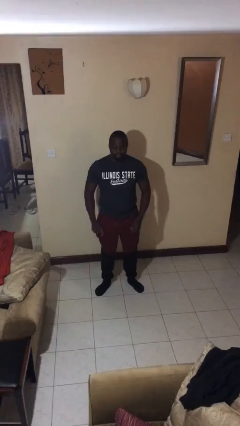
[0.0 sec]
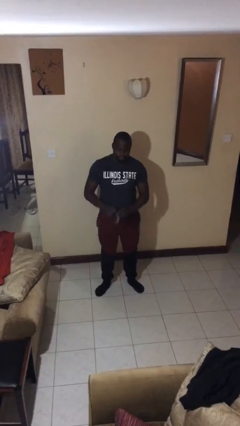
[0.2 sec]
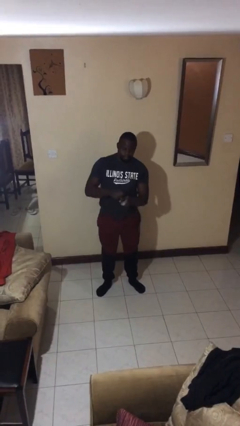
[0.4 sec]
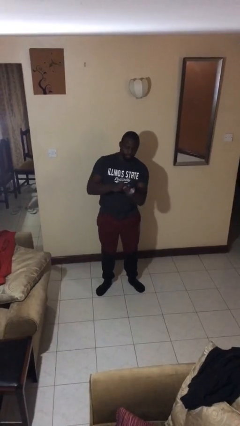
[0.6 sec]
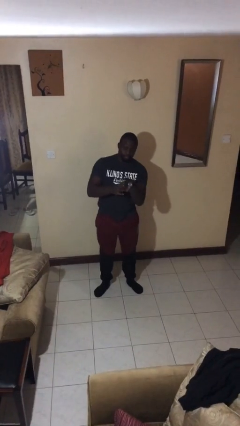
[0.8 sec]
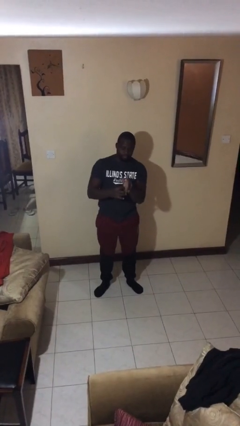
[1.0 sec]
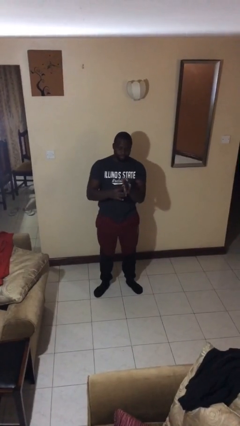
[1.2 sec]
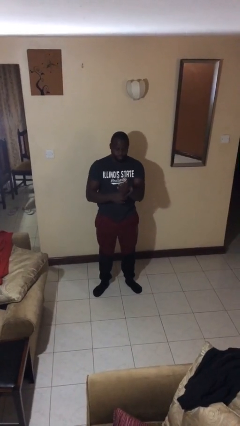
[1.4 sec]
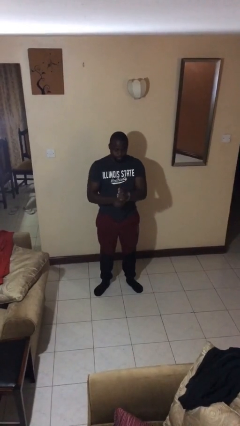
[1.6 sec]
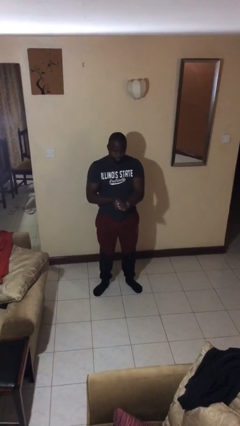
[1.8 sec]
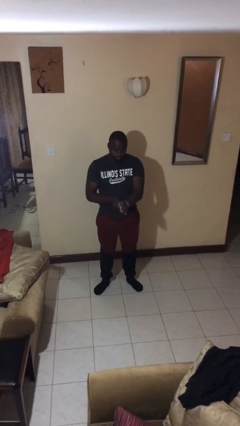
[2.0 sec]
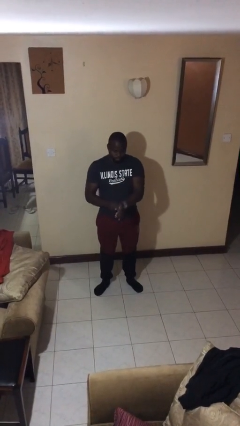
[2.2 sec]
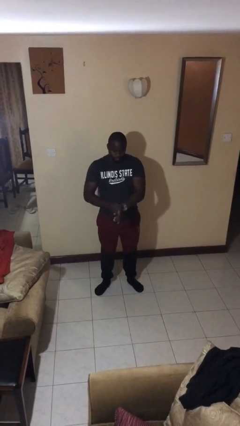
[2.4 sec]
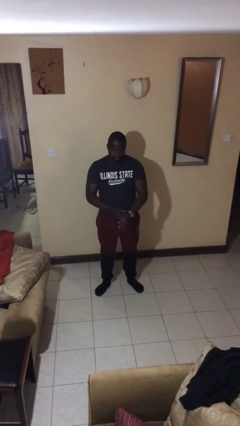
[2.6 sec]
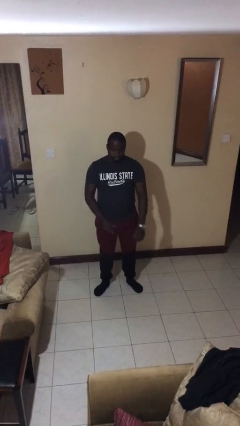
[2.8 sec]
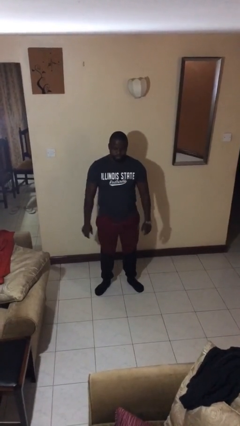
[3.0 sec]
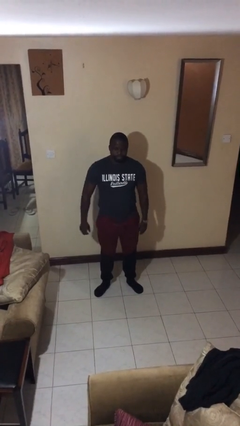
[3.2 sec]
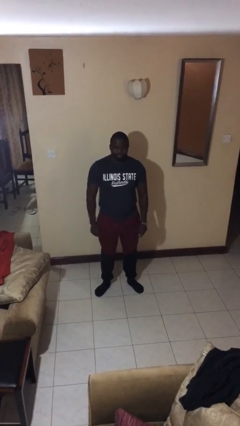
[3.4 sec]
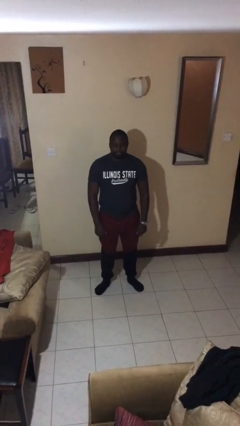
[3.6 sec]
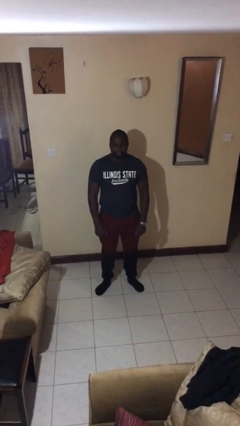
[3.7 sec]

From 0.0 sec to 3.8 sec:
person puts on wristwatch

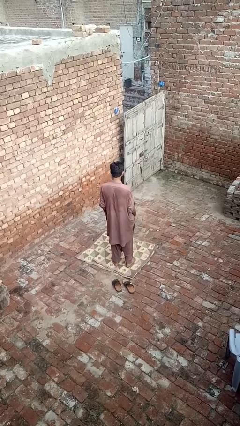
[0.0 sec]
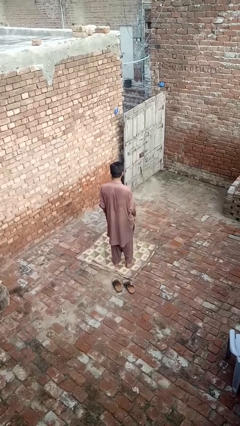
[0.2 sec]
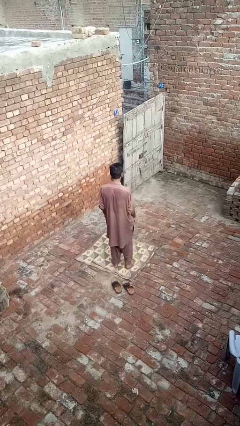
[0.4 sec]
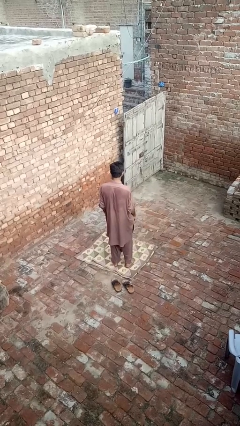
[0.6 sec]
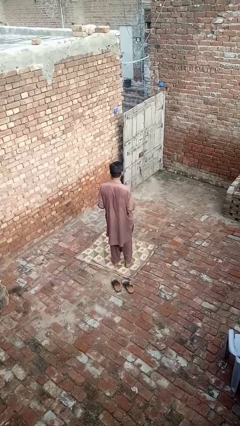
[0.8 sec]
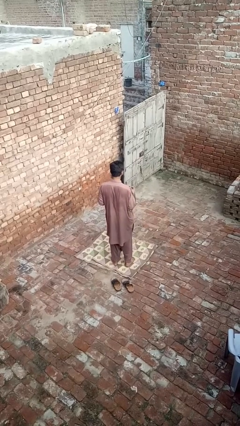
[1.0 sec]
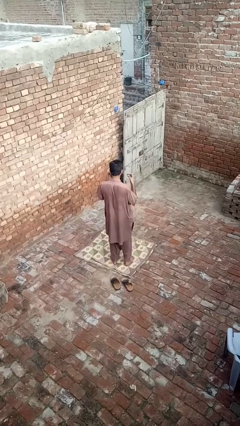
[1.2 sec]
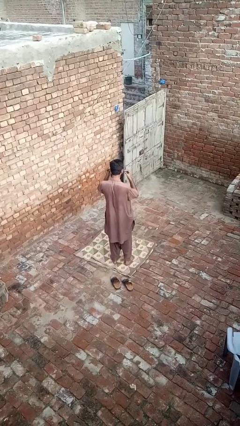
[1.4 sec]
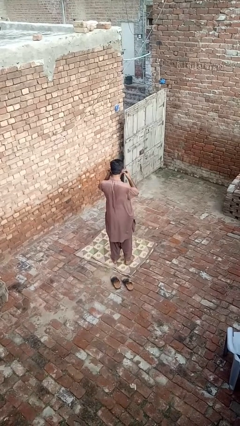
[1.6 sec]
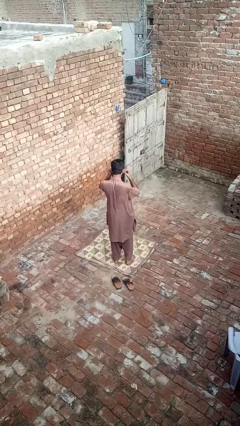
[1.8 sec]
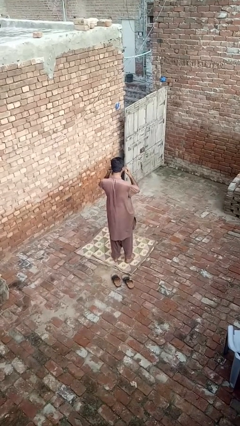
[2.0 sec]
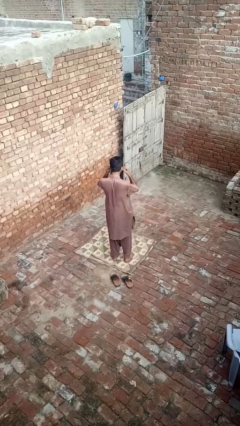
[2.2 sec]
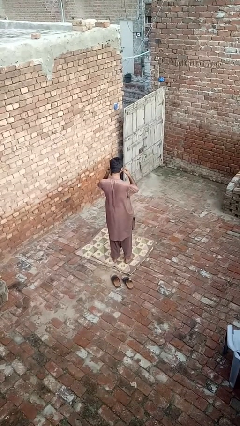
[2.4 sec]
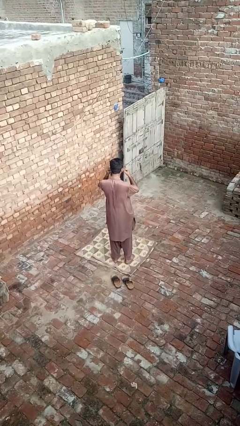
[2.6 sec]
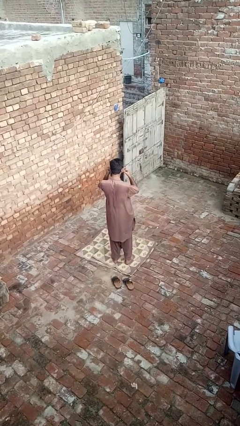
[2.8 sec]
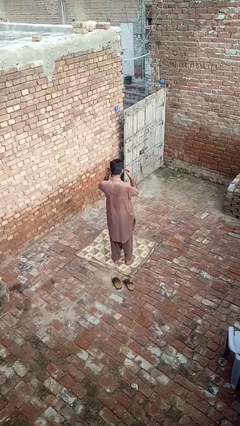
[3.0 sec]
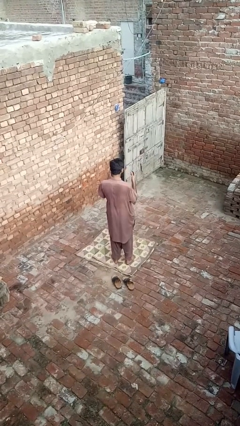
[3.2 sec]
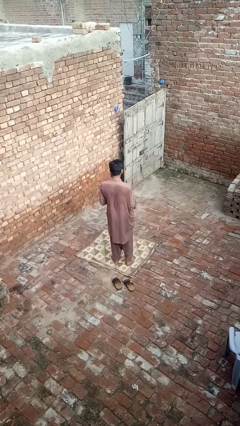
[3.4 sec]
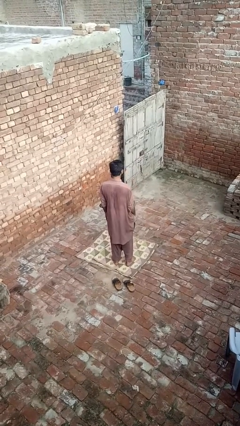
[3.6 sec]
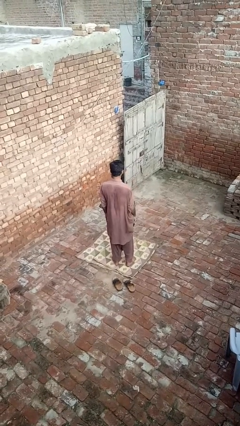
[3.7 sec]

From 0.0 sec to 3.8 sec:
person puts on headphones

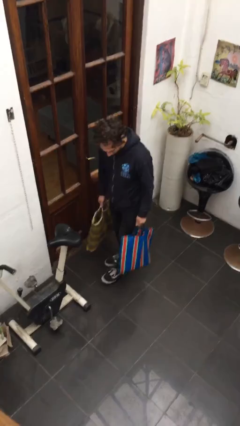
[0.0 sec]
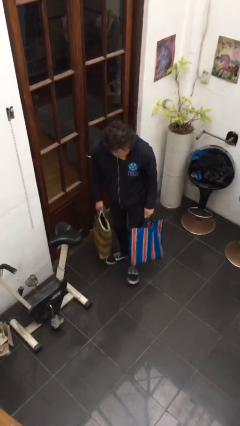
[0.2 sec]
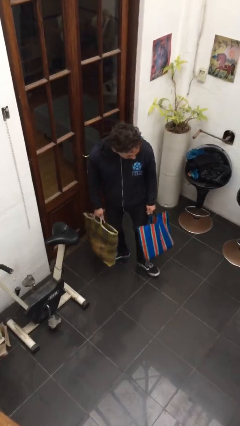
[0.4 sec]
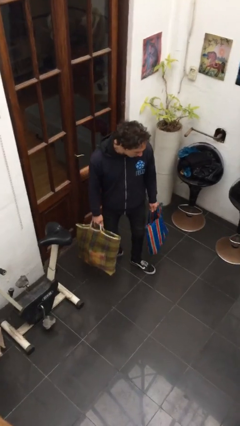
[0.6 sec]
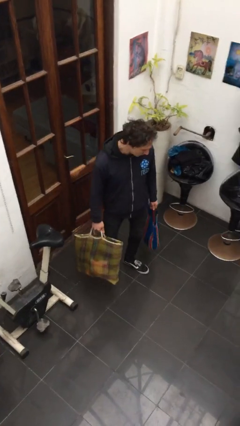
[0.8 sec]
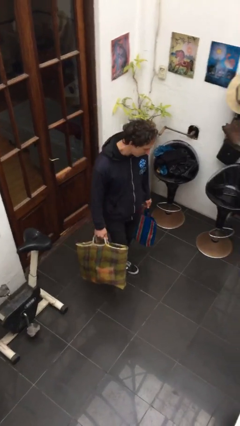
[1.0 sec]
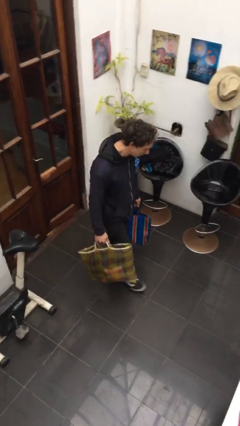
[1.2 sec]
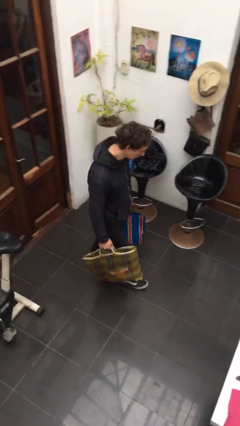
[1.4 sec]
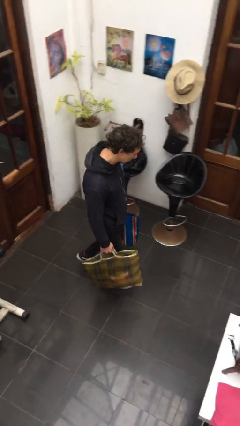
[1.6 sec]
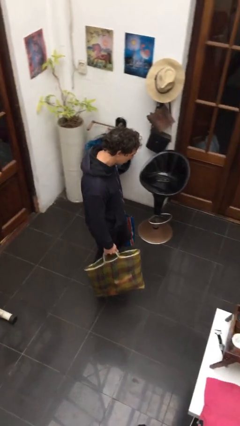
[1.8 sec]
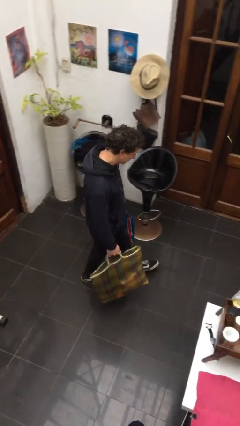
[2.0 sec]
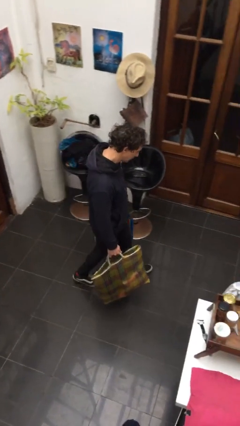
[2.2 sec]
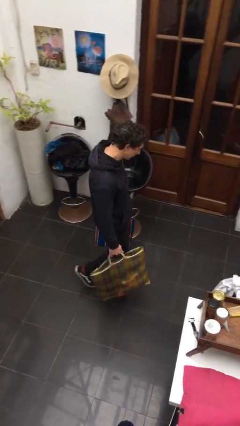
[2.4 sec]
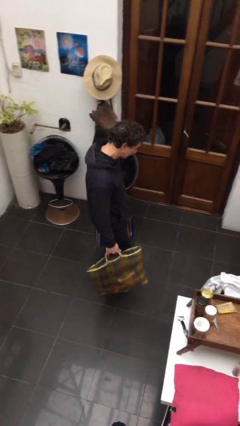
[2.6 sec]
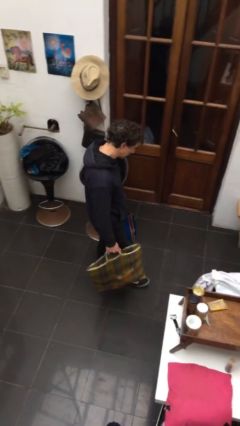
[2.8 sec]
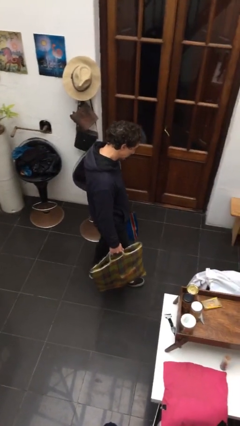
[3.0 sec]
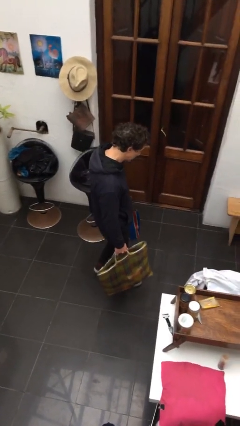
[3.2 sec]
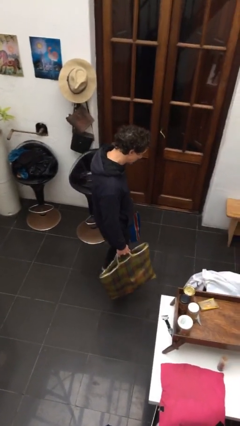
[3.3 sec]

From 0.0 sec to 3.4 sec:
person carries groceries

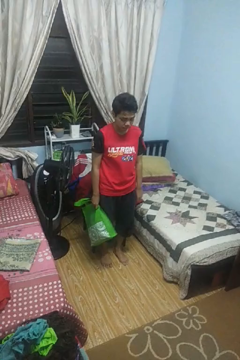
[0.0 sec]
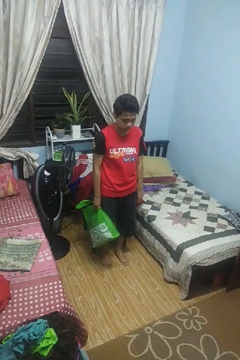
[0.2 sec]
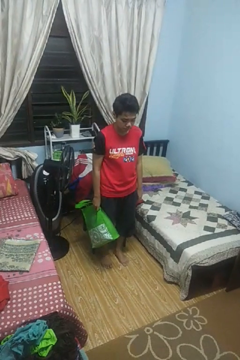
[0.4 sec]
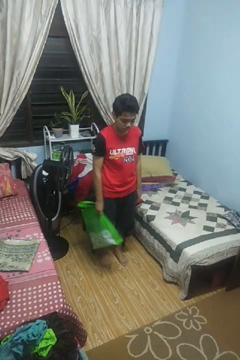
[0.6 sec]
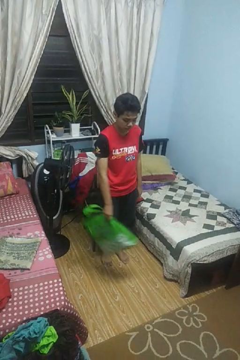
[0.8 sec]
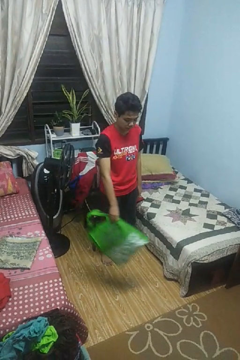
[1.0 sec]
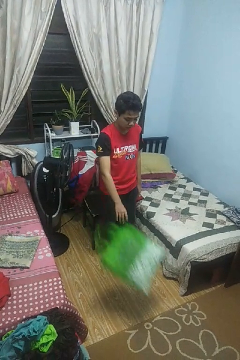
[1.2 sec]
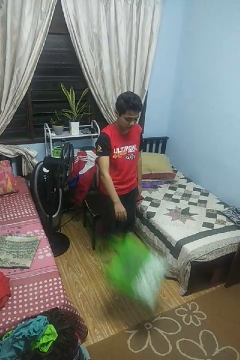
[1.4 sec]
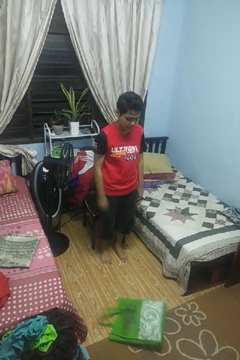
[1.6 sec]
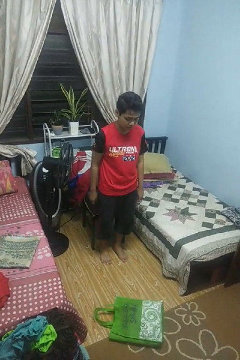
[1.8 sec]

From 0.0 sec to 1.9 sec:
person throws object to ground

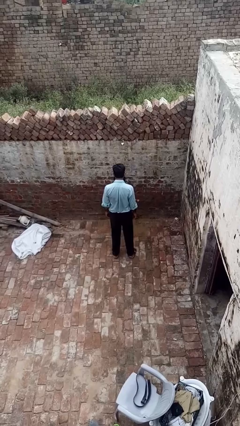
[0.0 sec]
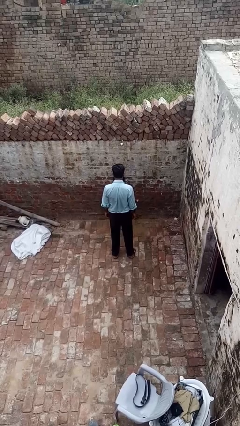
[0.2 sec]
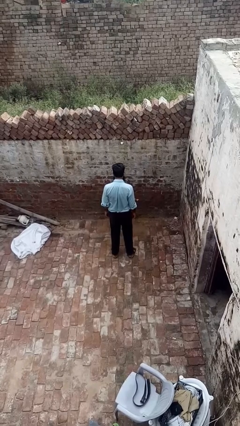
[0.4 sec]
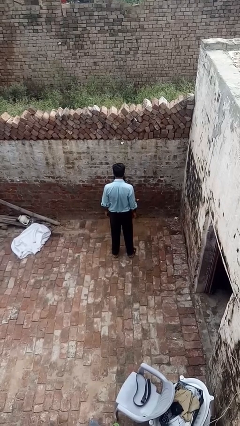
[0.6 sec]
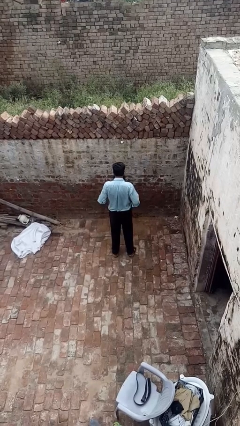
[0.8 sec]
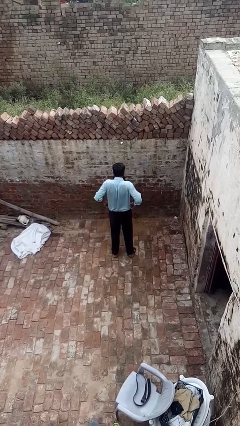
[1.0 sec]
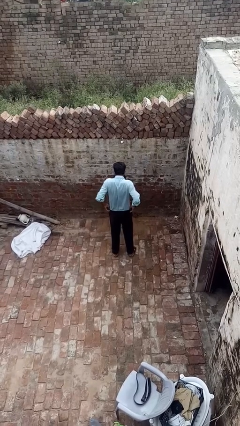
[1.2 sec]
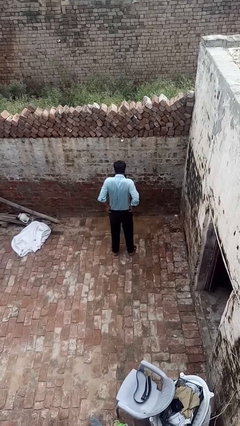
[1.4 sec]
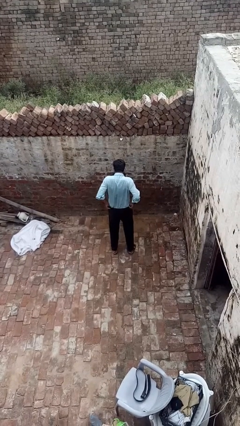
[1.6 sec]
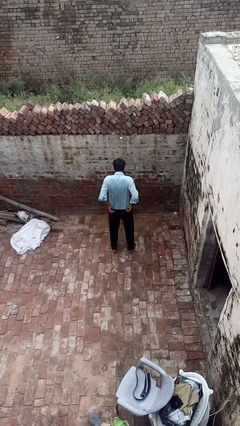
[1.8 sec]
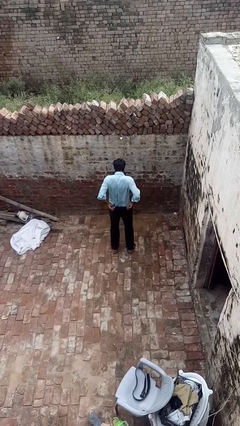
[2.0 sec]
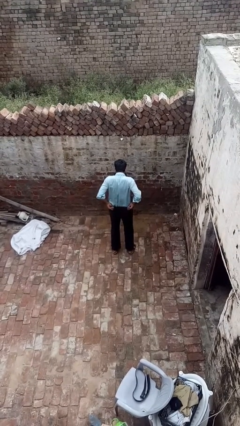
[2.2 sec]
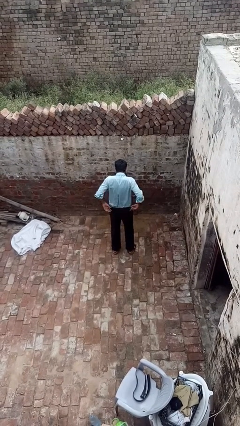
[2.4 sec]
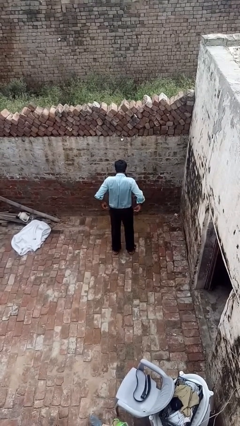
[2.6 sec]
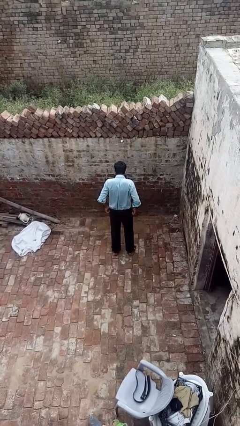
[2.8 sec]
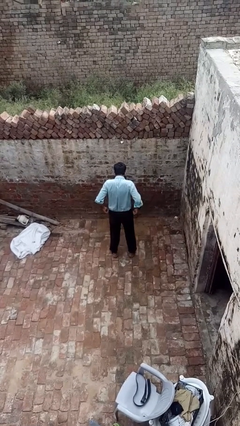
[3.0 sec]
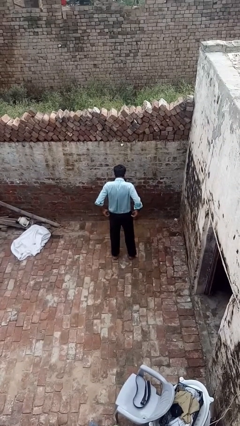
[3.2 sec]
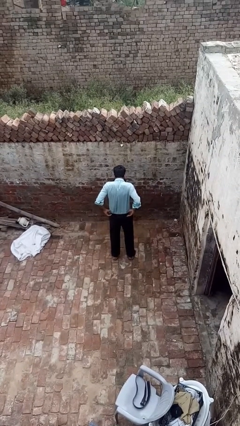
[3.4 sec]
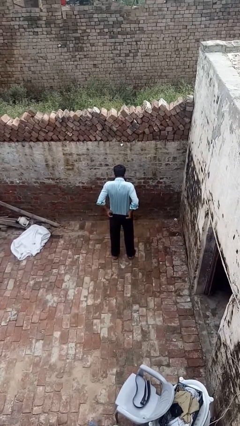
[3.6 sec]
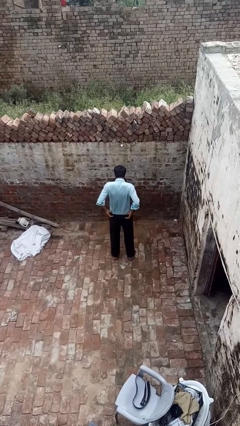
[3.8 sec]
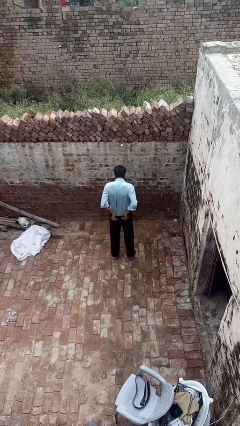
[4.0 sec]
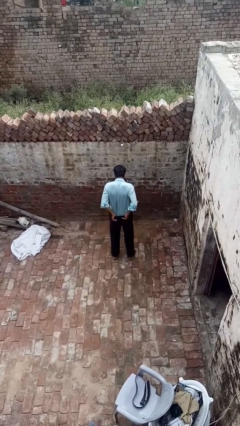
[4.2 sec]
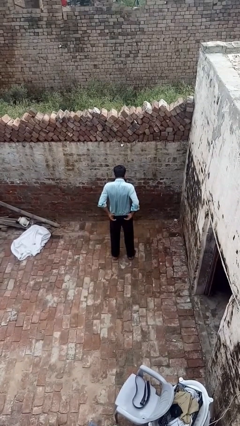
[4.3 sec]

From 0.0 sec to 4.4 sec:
person hikes up pants
